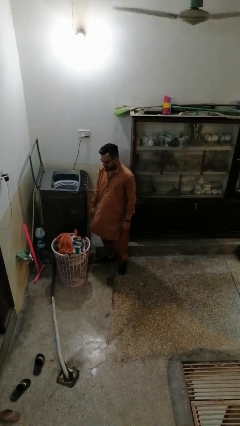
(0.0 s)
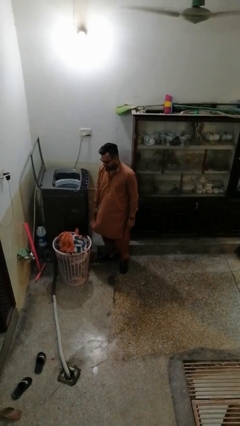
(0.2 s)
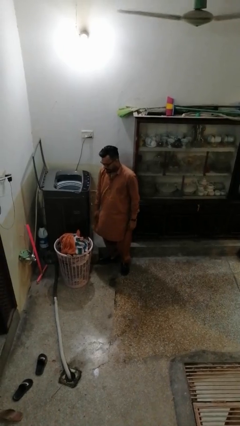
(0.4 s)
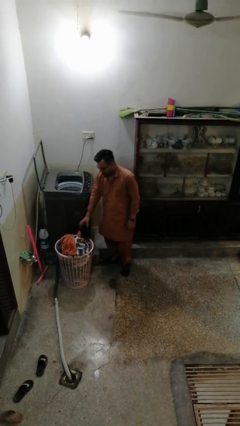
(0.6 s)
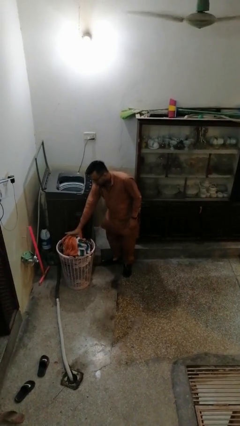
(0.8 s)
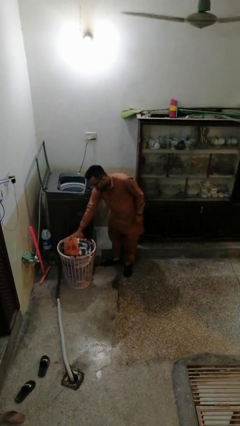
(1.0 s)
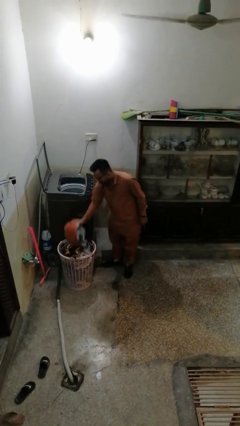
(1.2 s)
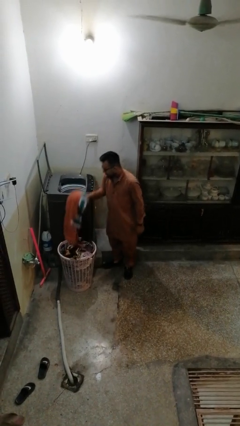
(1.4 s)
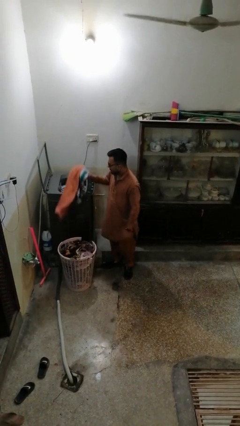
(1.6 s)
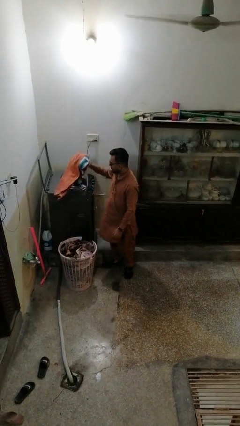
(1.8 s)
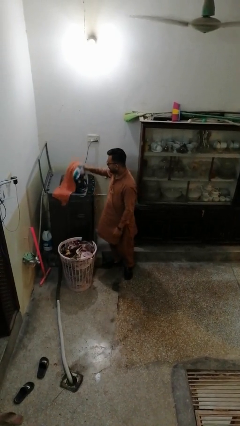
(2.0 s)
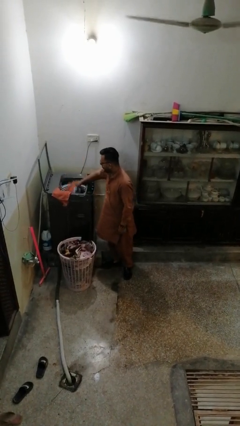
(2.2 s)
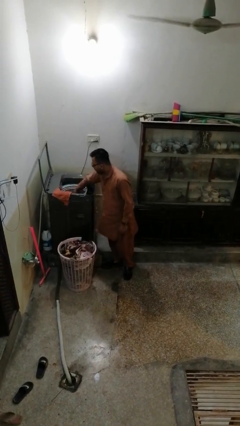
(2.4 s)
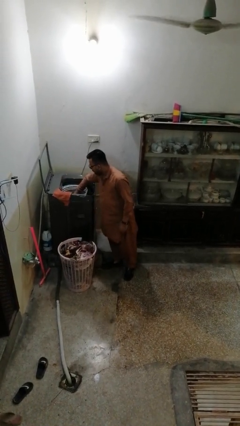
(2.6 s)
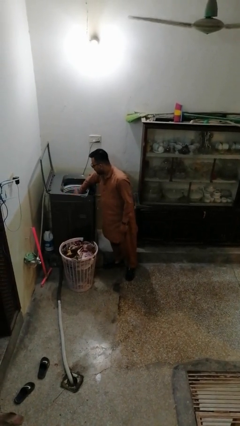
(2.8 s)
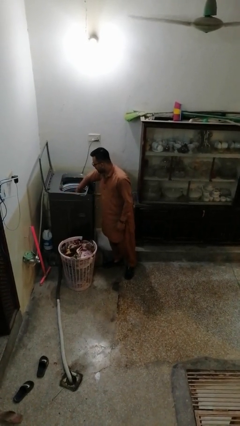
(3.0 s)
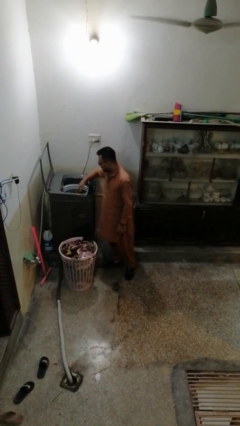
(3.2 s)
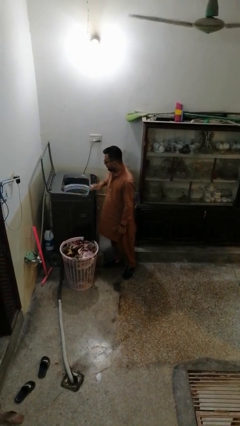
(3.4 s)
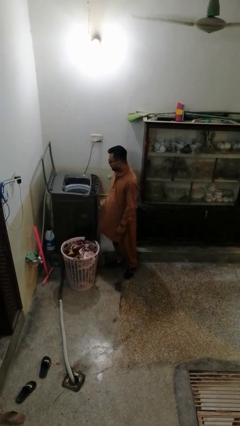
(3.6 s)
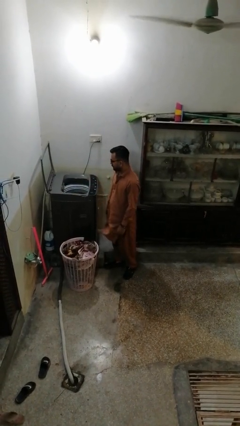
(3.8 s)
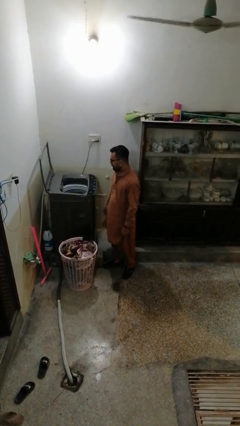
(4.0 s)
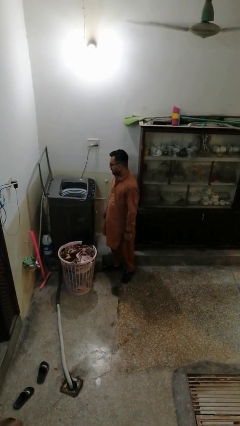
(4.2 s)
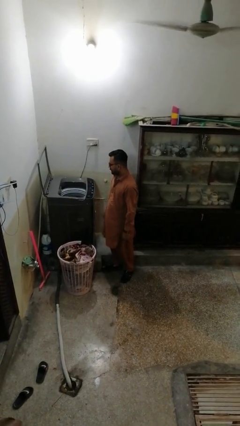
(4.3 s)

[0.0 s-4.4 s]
person loads clotheswasher

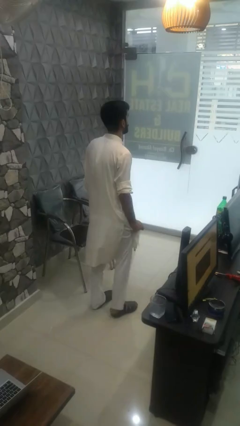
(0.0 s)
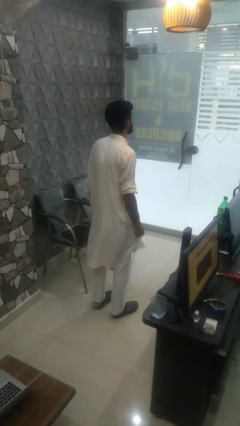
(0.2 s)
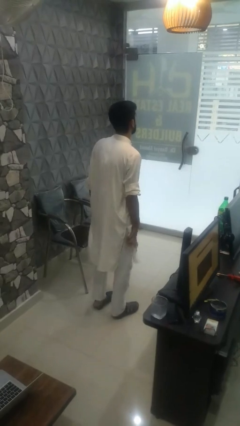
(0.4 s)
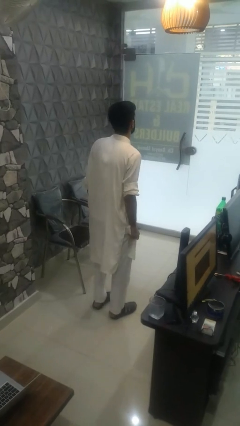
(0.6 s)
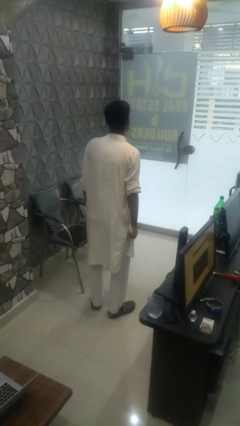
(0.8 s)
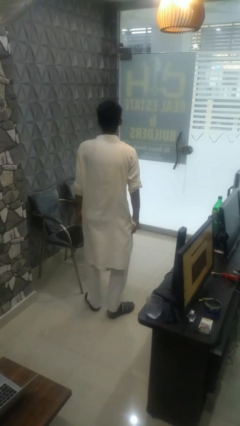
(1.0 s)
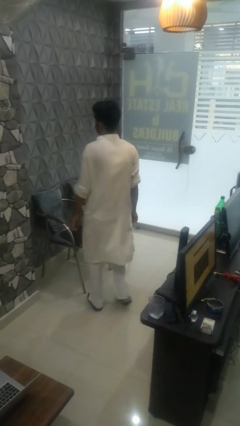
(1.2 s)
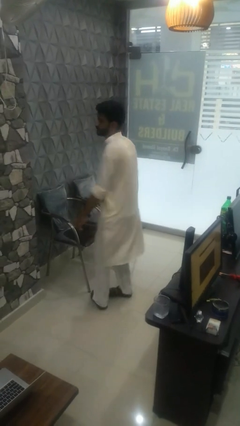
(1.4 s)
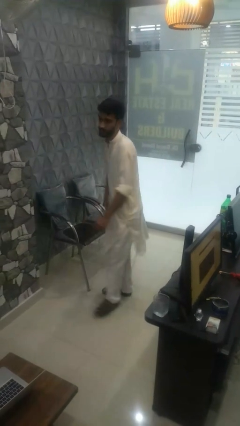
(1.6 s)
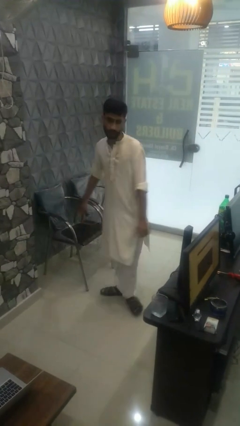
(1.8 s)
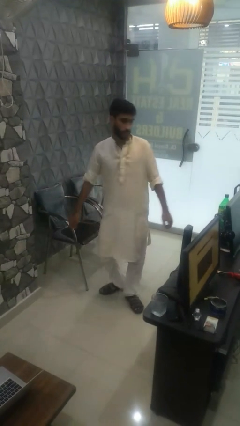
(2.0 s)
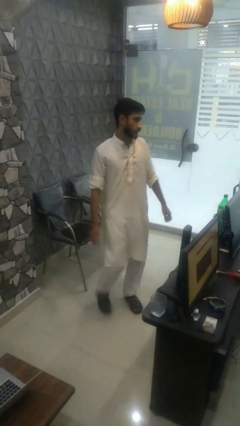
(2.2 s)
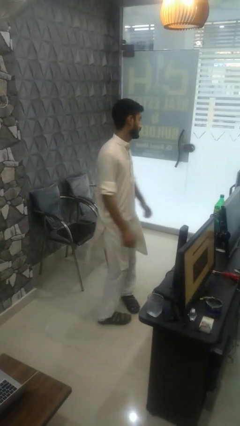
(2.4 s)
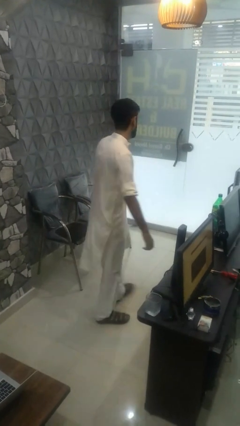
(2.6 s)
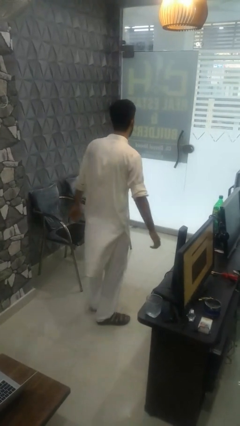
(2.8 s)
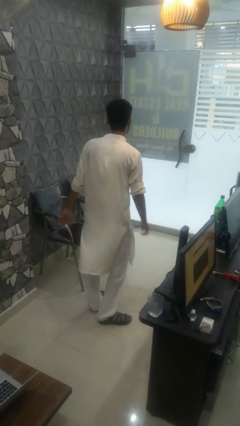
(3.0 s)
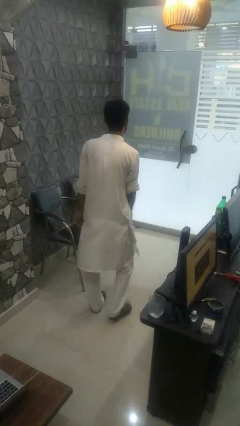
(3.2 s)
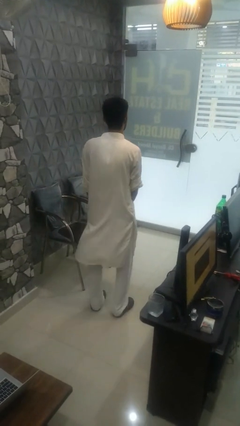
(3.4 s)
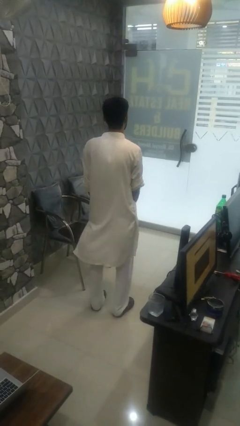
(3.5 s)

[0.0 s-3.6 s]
person twirls

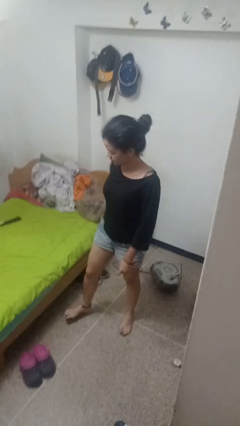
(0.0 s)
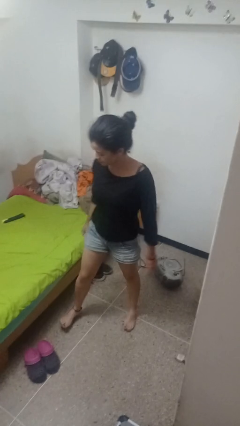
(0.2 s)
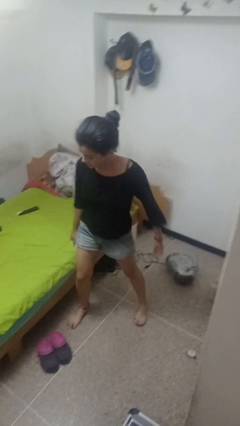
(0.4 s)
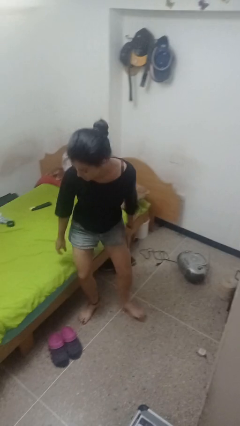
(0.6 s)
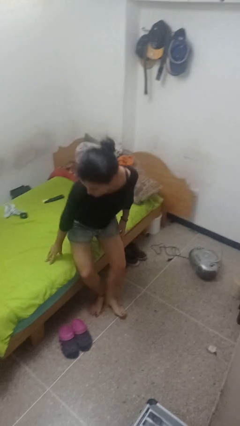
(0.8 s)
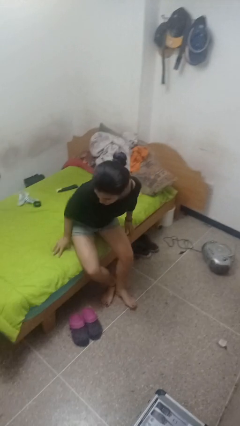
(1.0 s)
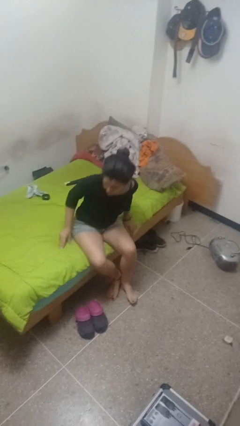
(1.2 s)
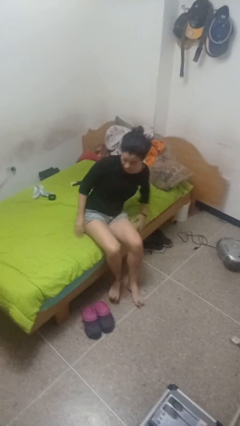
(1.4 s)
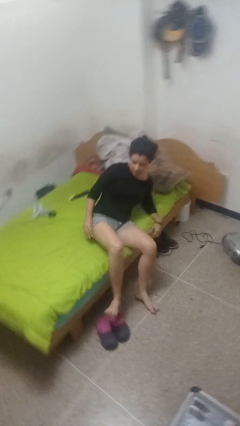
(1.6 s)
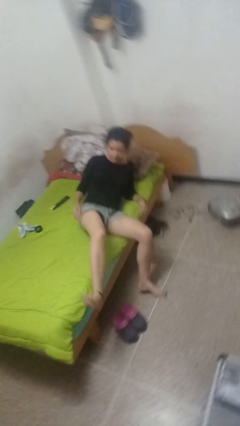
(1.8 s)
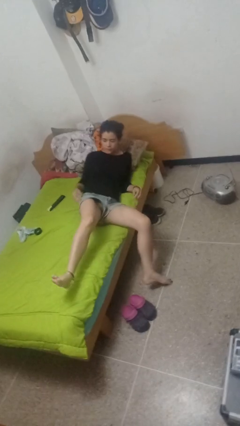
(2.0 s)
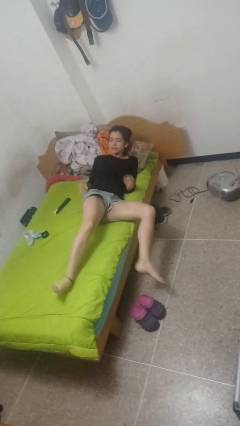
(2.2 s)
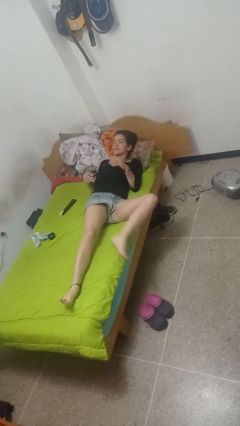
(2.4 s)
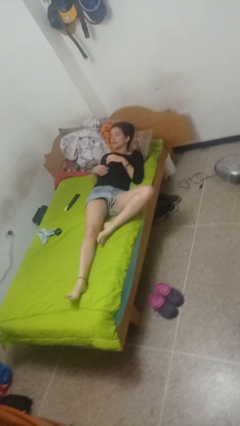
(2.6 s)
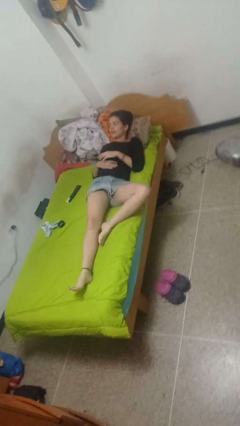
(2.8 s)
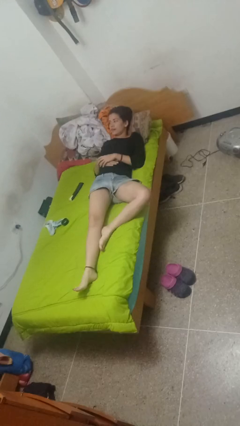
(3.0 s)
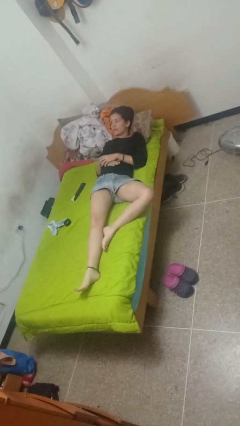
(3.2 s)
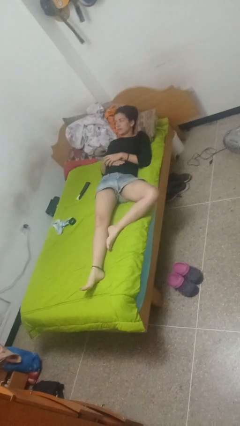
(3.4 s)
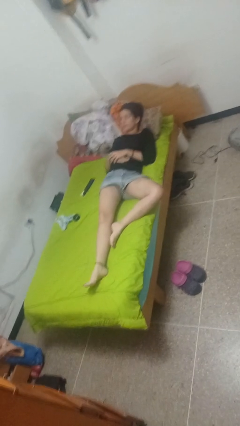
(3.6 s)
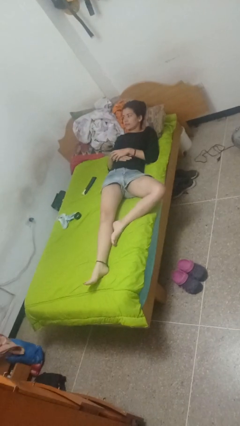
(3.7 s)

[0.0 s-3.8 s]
person lies down on bed

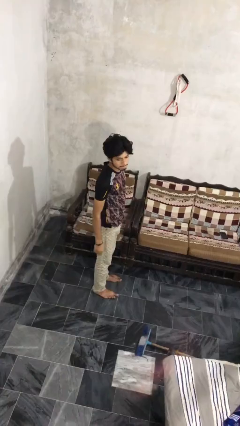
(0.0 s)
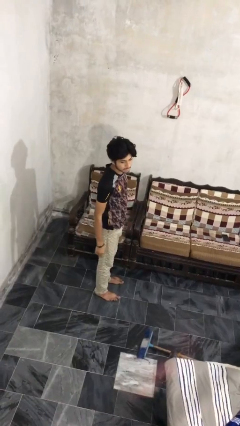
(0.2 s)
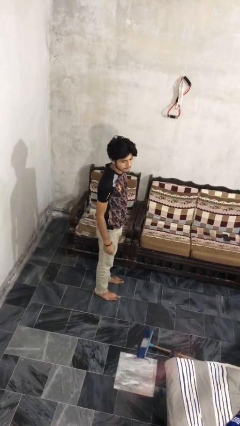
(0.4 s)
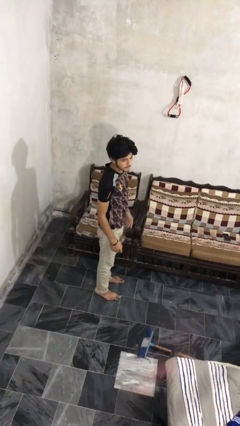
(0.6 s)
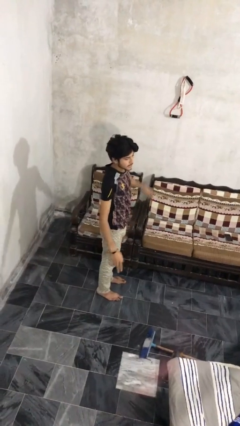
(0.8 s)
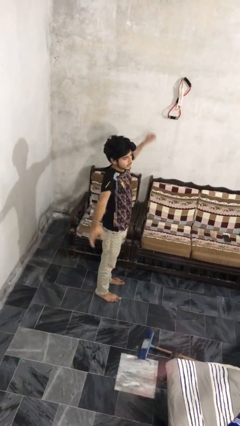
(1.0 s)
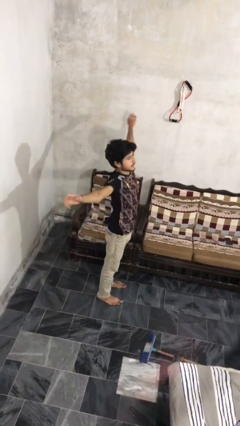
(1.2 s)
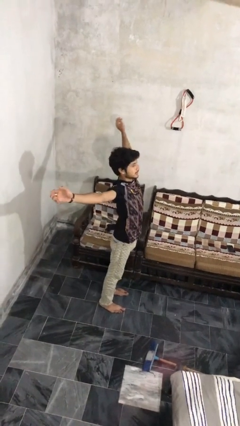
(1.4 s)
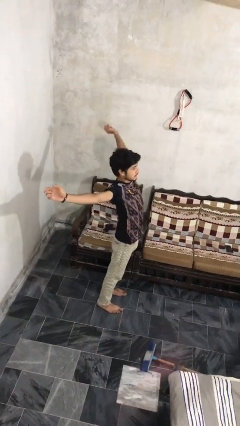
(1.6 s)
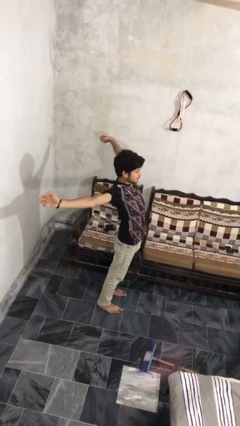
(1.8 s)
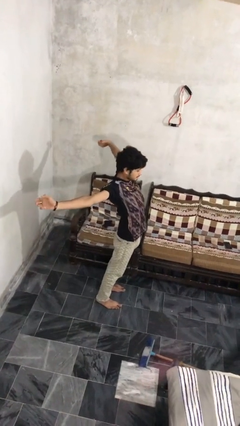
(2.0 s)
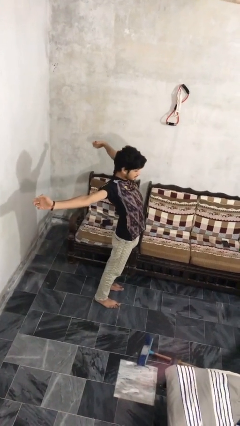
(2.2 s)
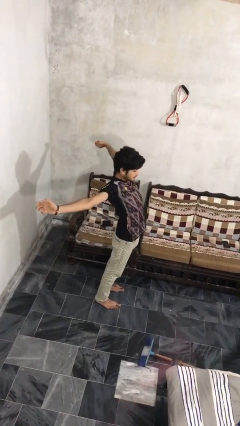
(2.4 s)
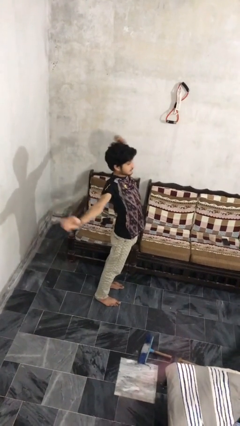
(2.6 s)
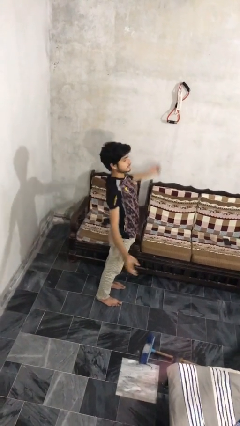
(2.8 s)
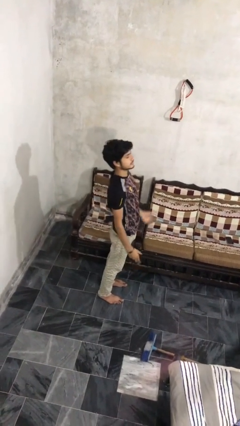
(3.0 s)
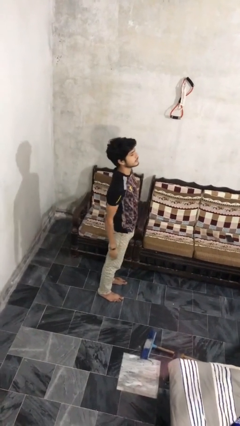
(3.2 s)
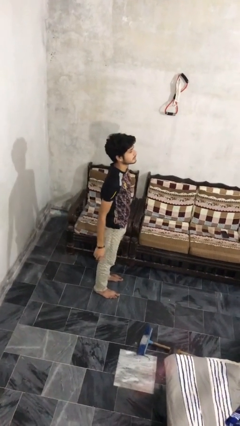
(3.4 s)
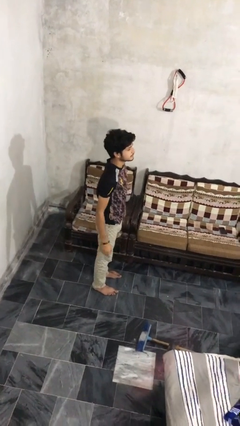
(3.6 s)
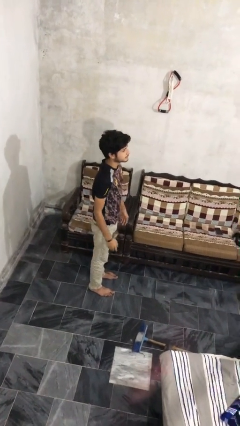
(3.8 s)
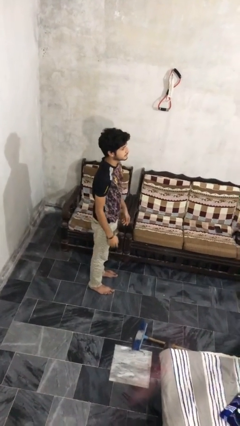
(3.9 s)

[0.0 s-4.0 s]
person stretches arms to side

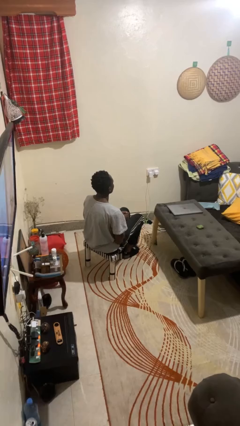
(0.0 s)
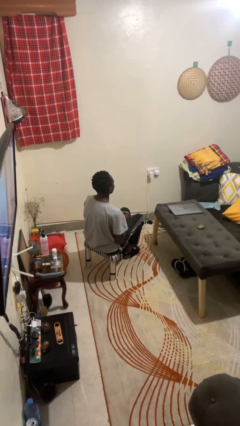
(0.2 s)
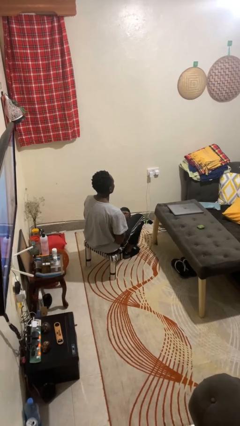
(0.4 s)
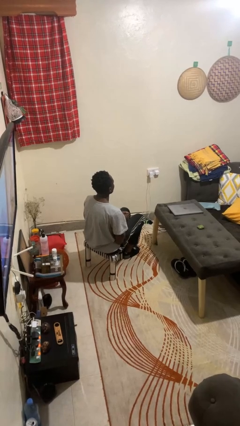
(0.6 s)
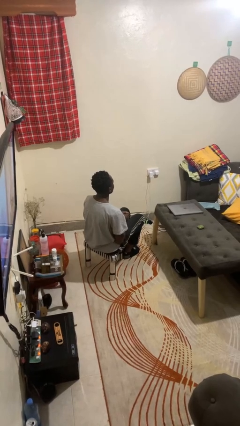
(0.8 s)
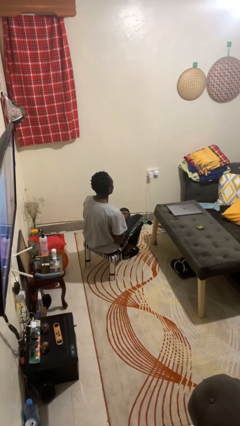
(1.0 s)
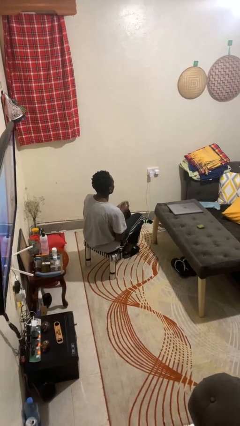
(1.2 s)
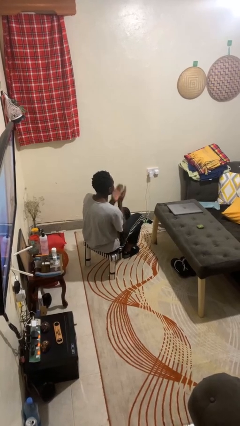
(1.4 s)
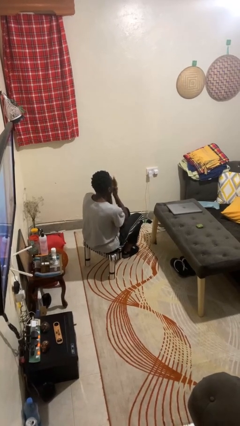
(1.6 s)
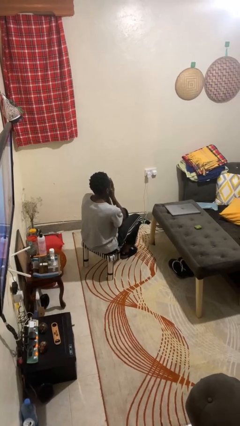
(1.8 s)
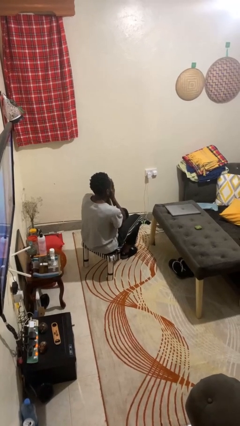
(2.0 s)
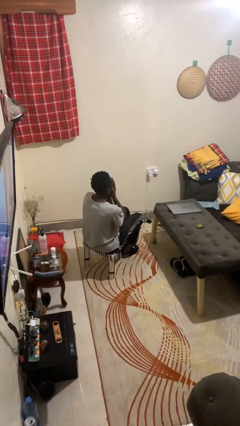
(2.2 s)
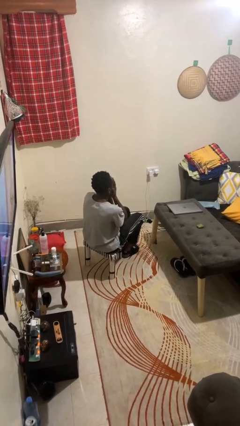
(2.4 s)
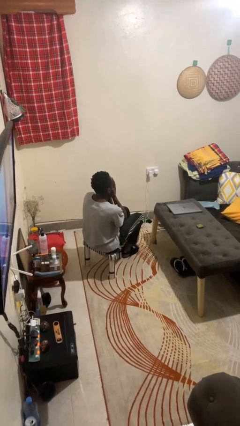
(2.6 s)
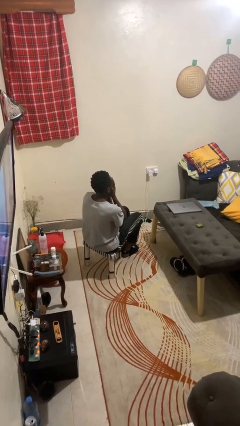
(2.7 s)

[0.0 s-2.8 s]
person covers face with hands
